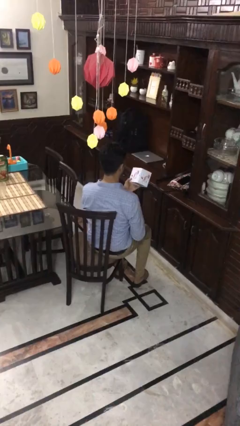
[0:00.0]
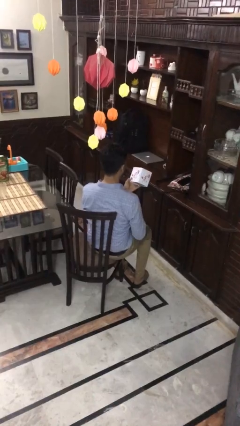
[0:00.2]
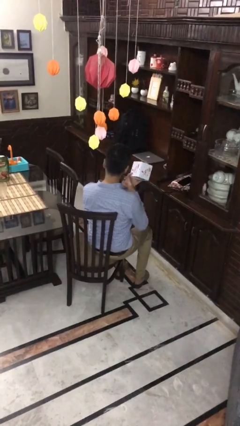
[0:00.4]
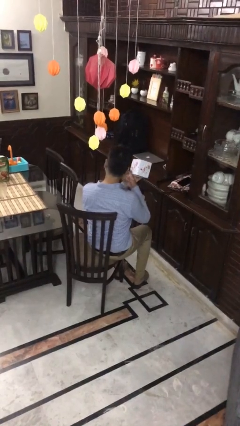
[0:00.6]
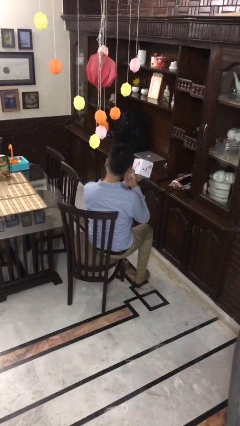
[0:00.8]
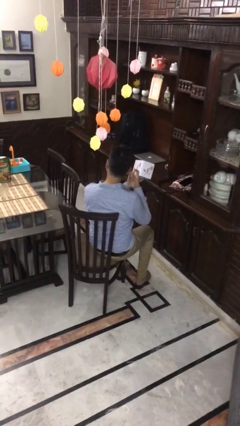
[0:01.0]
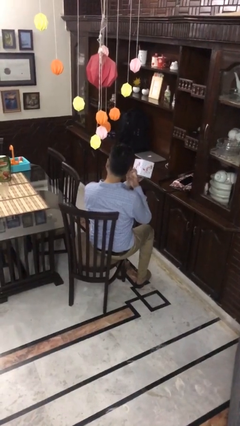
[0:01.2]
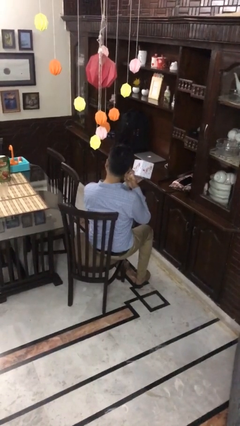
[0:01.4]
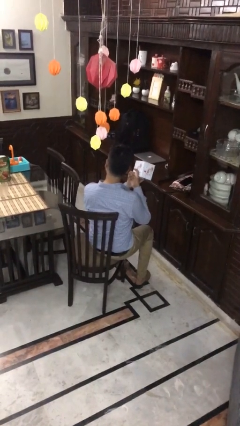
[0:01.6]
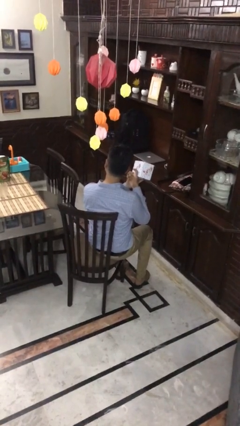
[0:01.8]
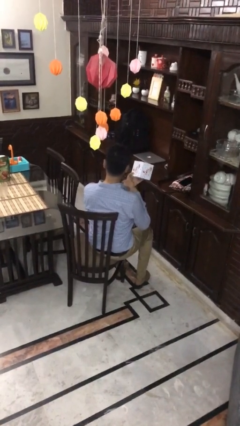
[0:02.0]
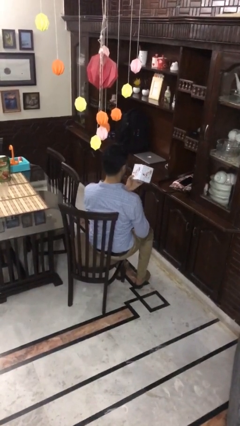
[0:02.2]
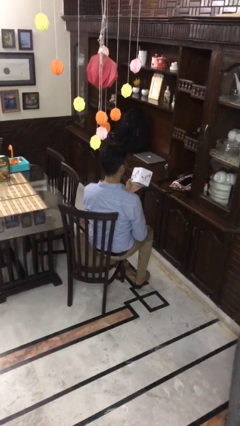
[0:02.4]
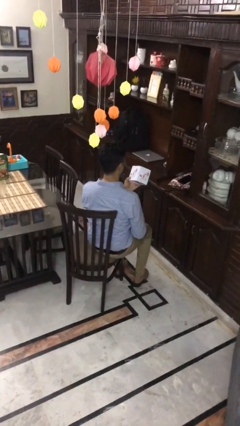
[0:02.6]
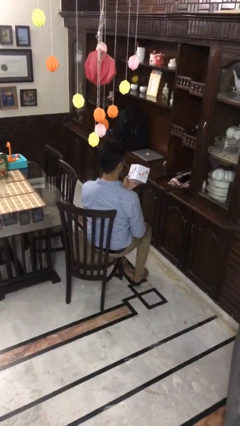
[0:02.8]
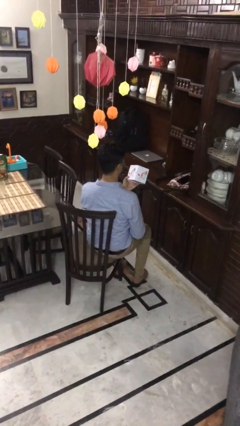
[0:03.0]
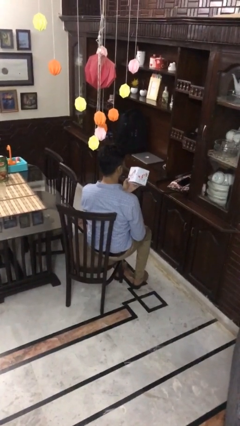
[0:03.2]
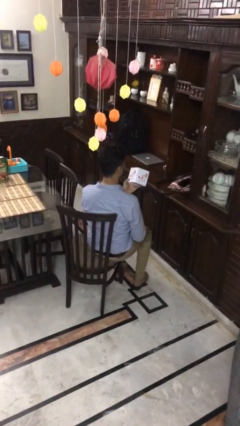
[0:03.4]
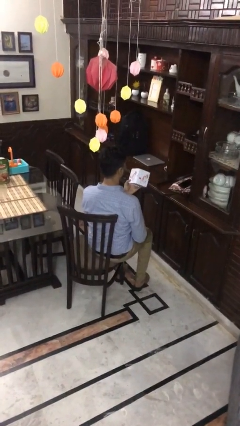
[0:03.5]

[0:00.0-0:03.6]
person taps object with finger

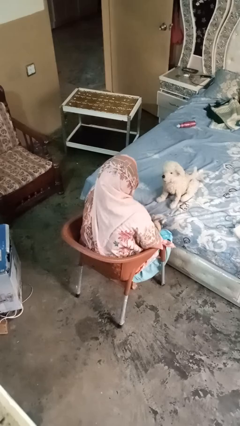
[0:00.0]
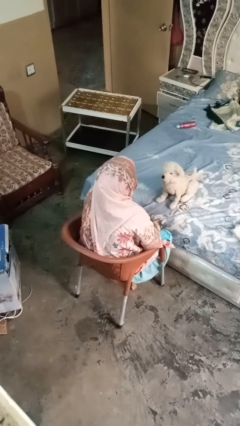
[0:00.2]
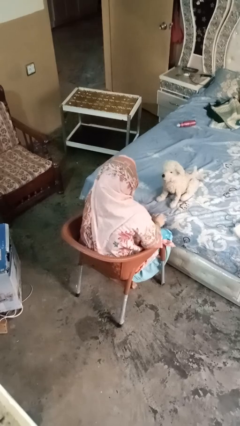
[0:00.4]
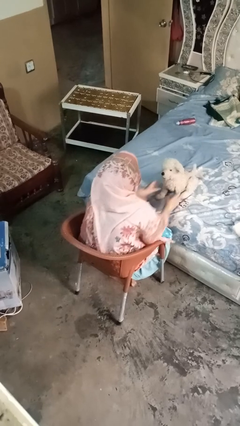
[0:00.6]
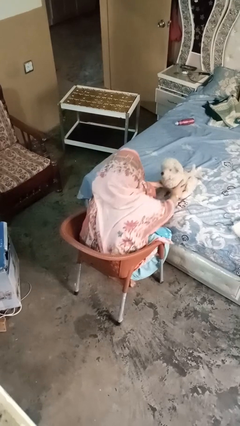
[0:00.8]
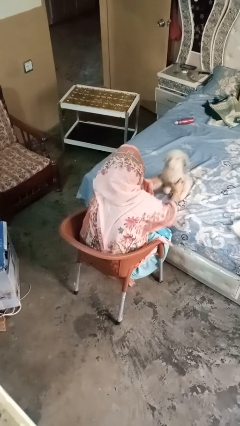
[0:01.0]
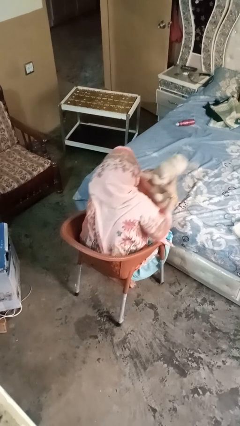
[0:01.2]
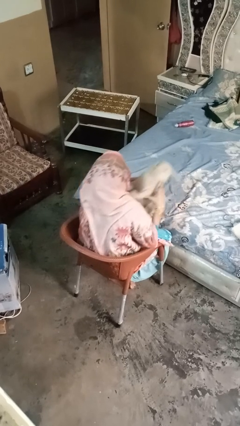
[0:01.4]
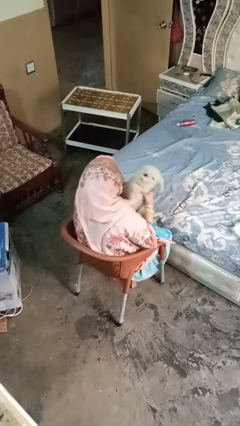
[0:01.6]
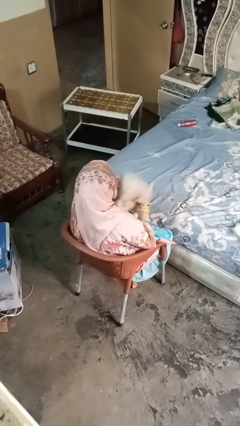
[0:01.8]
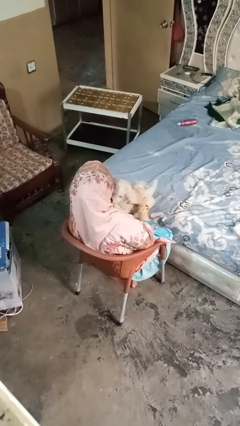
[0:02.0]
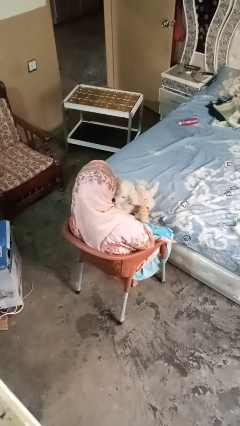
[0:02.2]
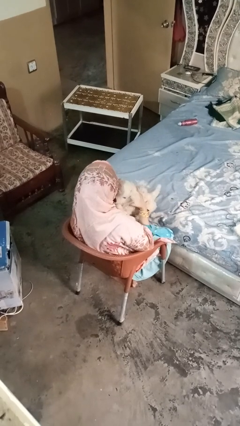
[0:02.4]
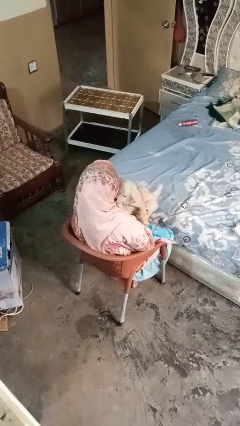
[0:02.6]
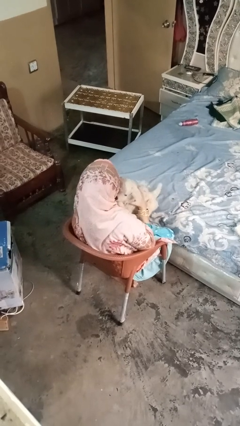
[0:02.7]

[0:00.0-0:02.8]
person hugs stuffed animal

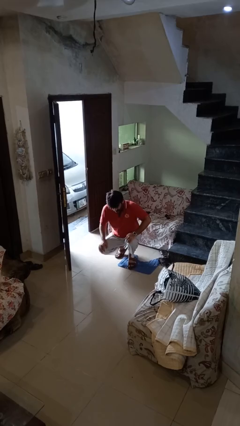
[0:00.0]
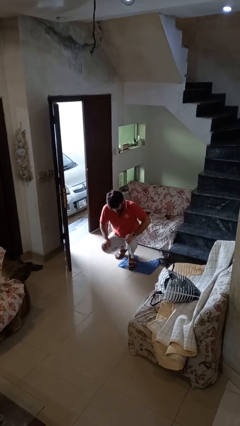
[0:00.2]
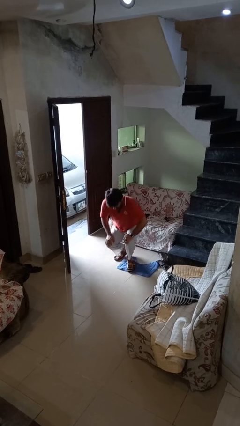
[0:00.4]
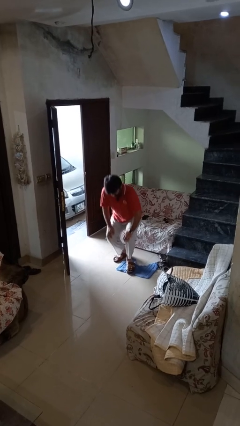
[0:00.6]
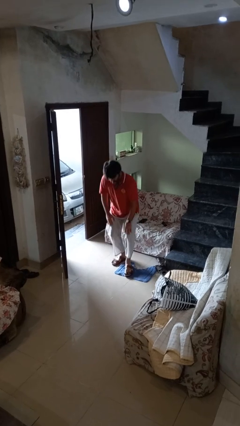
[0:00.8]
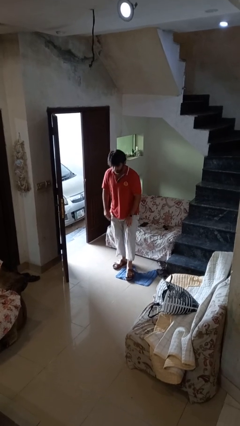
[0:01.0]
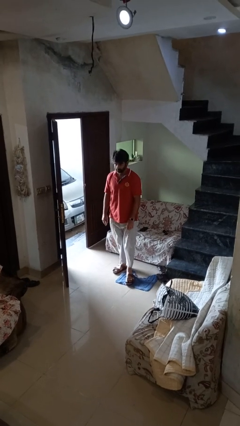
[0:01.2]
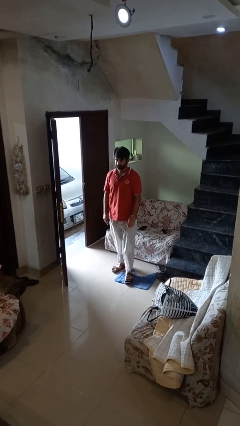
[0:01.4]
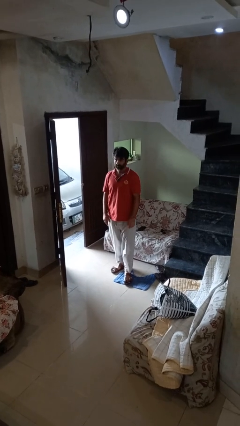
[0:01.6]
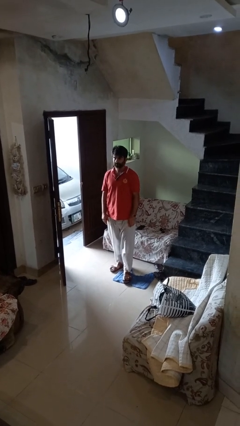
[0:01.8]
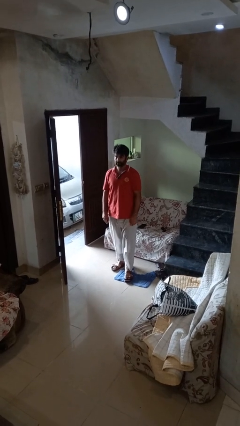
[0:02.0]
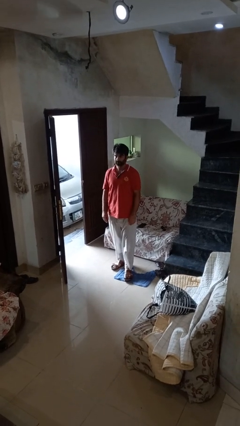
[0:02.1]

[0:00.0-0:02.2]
person stands up

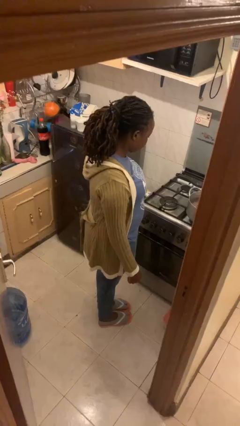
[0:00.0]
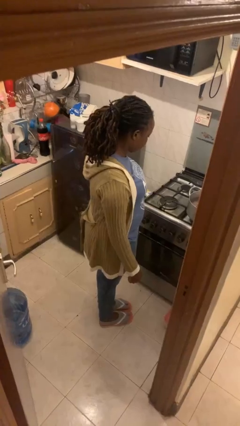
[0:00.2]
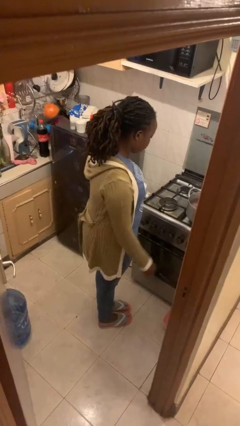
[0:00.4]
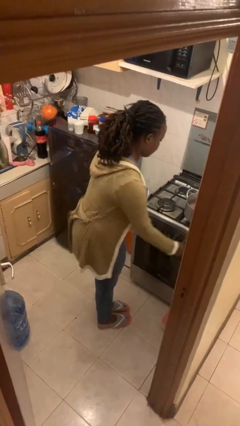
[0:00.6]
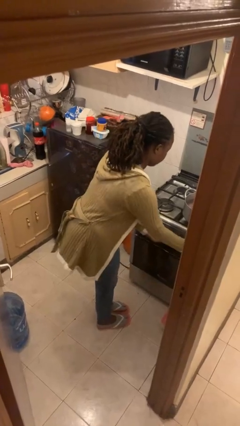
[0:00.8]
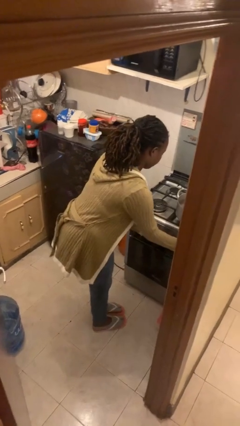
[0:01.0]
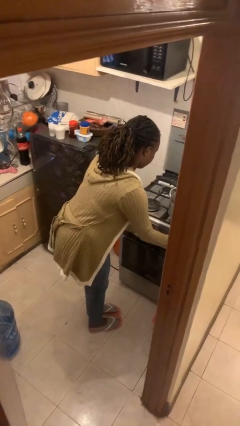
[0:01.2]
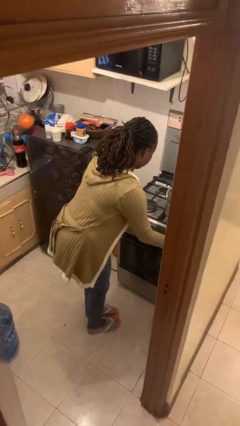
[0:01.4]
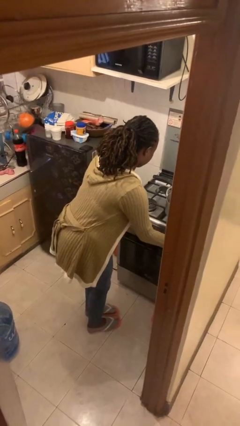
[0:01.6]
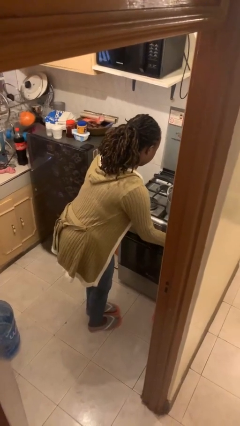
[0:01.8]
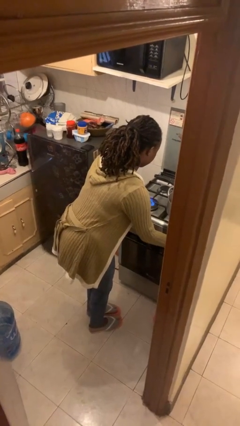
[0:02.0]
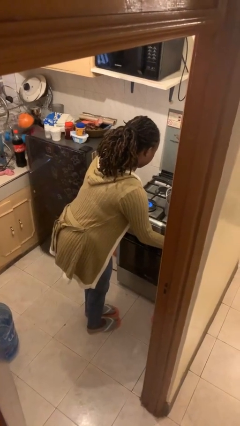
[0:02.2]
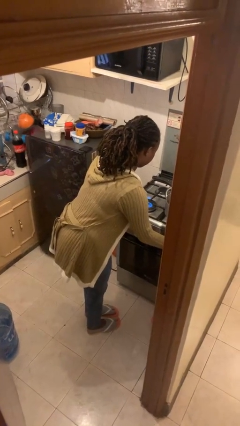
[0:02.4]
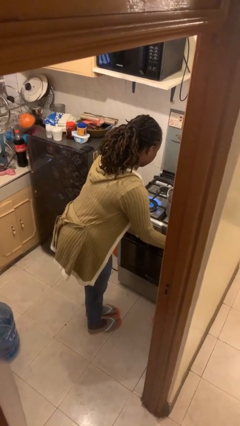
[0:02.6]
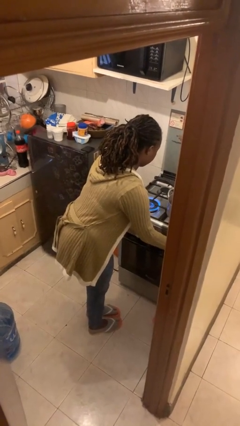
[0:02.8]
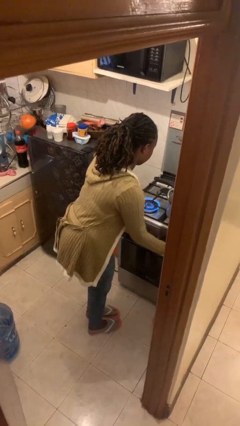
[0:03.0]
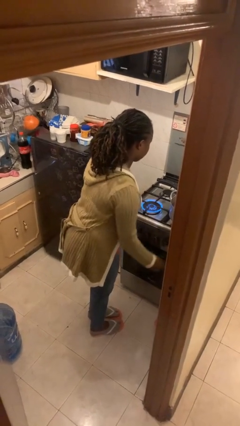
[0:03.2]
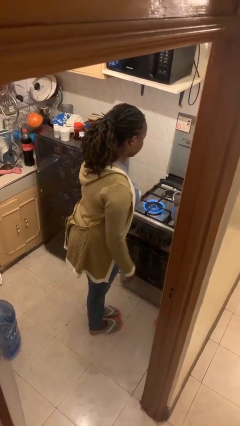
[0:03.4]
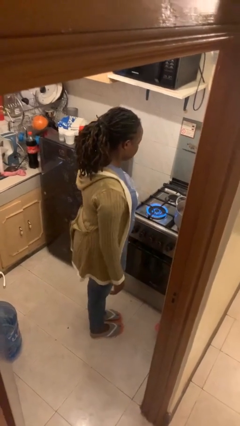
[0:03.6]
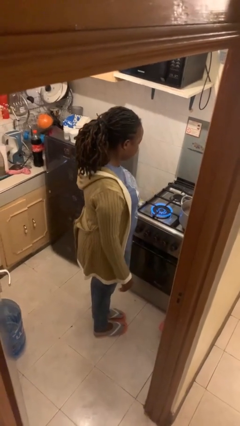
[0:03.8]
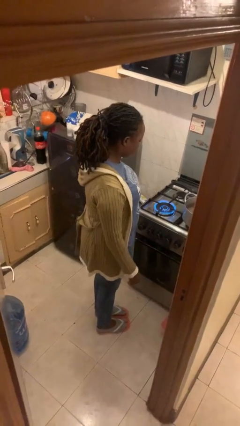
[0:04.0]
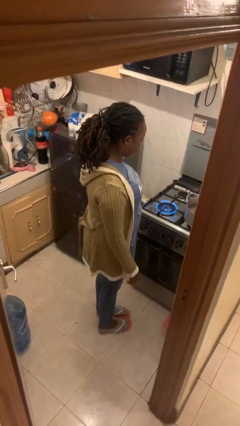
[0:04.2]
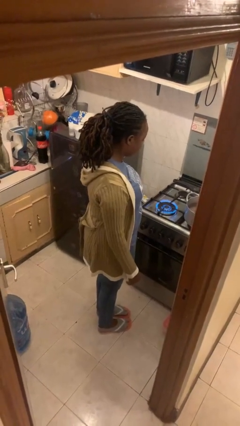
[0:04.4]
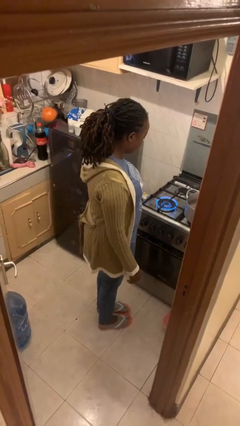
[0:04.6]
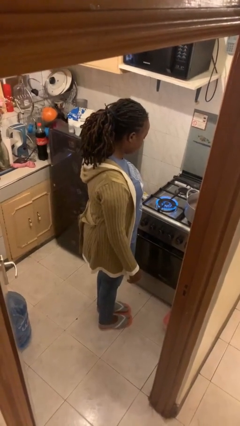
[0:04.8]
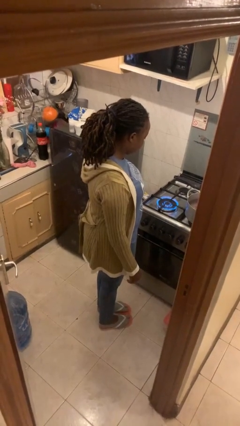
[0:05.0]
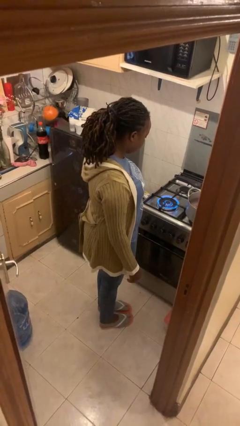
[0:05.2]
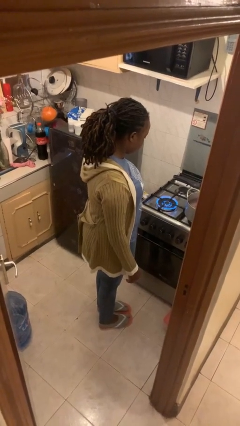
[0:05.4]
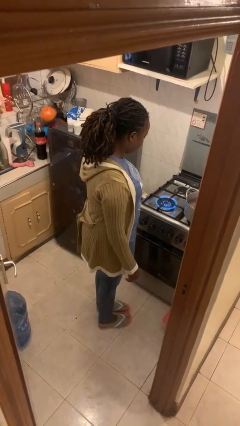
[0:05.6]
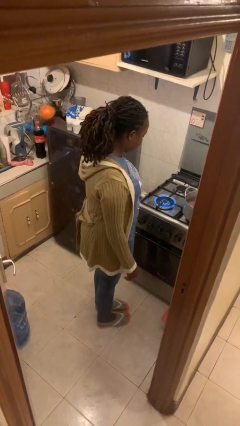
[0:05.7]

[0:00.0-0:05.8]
person turns on stovetop

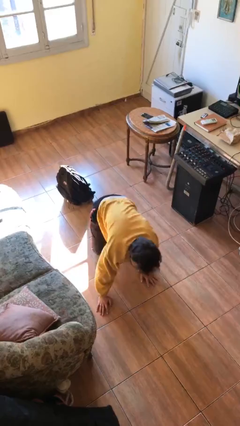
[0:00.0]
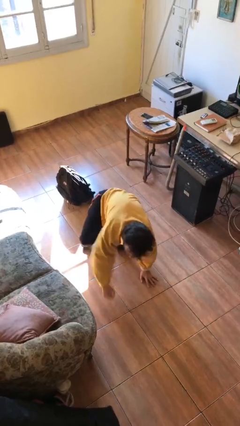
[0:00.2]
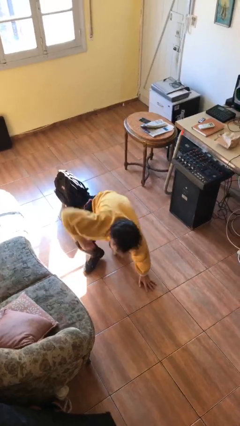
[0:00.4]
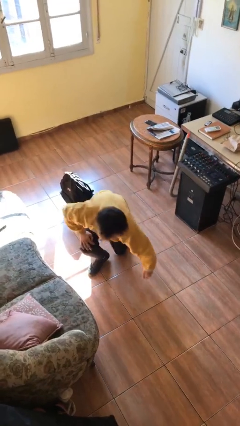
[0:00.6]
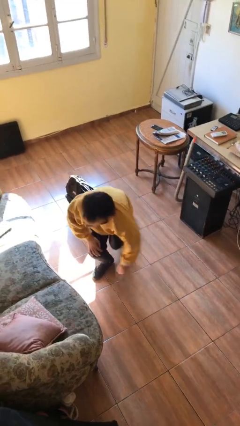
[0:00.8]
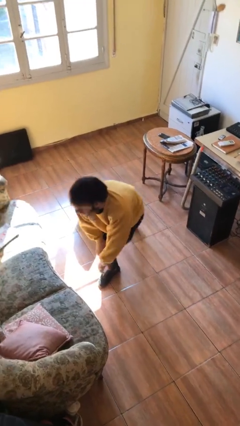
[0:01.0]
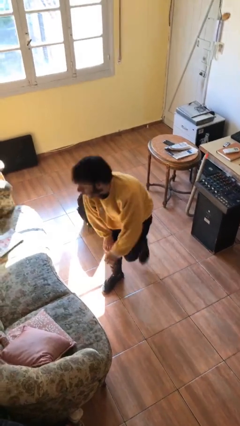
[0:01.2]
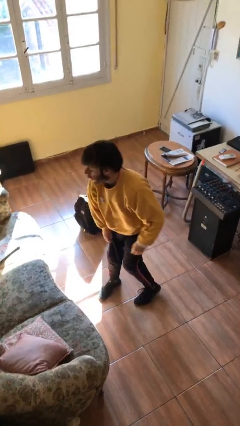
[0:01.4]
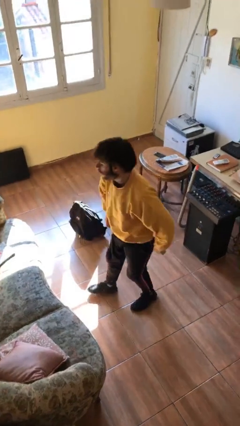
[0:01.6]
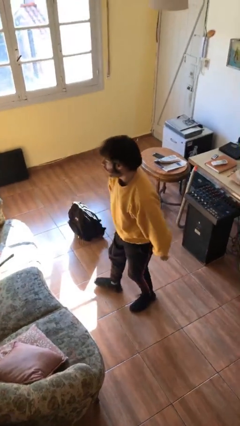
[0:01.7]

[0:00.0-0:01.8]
person stands up from floor

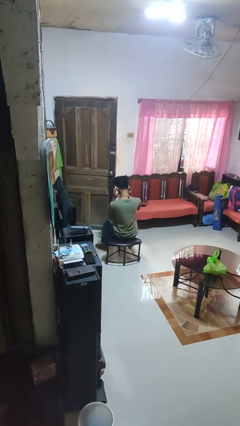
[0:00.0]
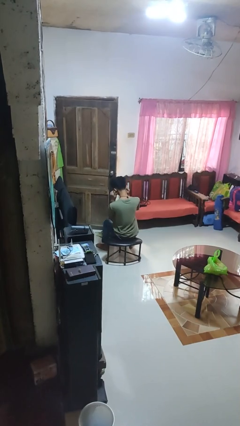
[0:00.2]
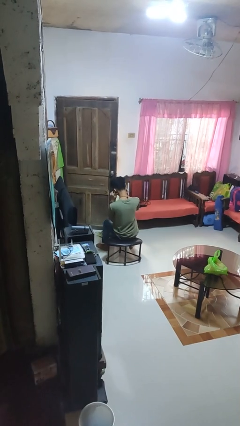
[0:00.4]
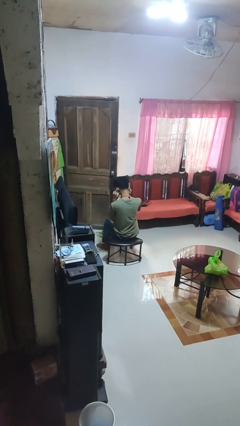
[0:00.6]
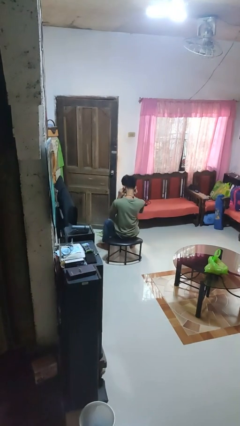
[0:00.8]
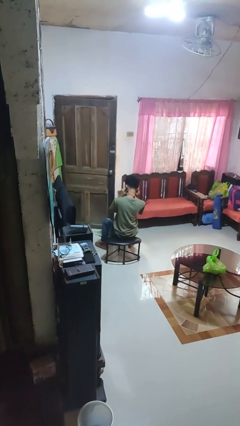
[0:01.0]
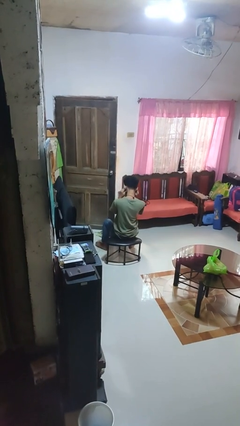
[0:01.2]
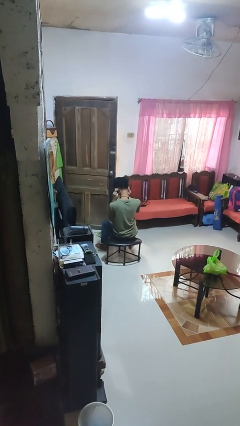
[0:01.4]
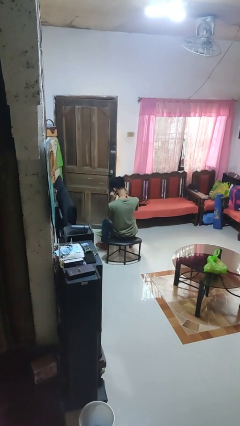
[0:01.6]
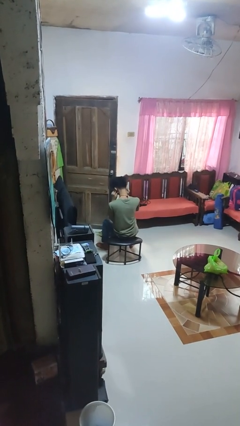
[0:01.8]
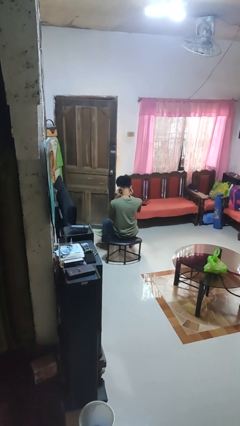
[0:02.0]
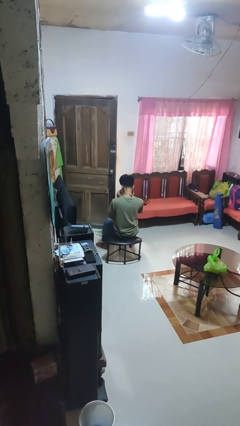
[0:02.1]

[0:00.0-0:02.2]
person puts fingers in ear
